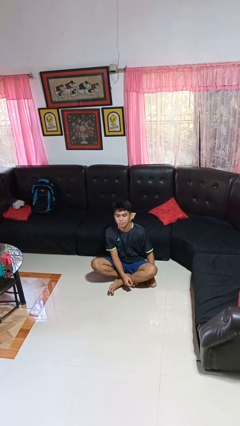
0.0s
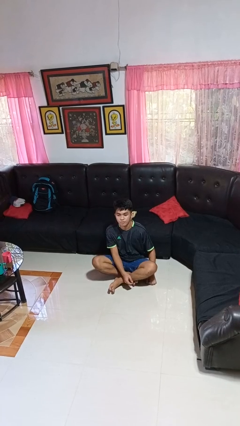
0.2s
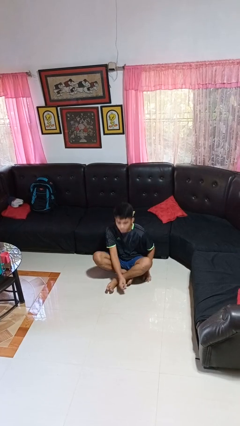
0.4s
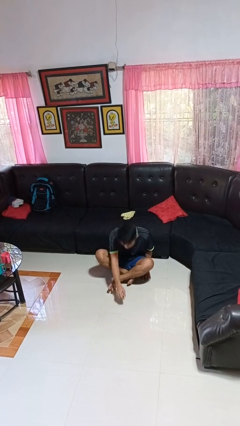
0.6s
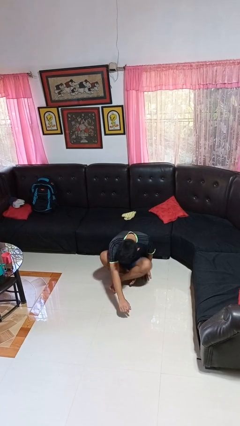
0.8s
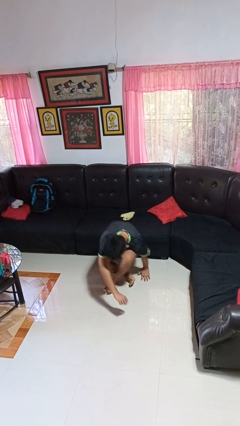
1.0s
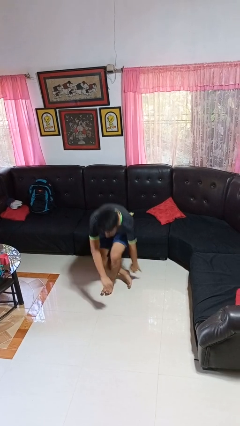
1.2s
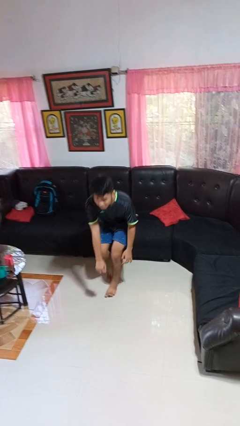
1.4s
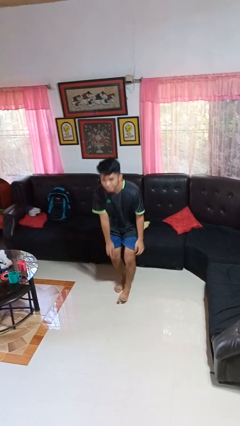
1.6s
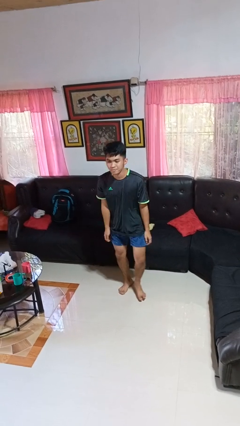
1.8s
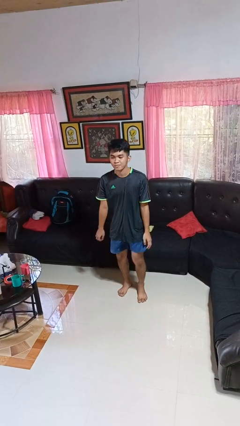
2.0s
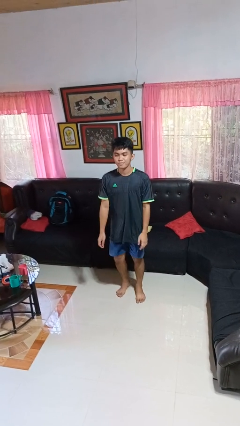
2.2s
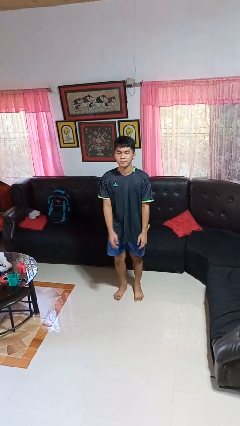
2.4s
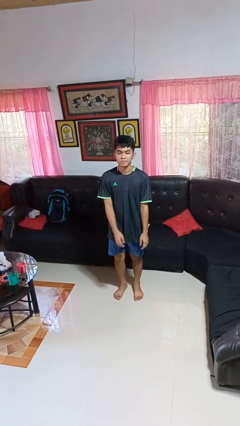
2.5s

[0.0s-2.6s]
person stands up from floor

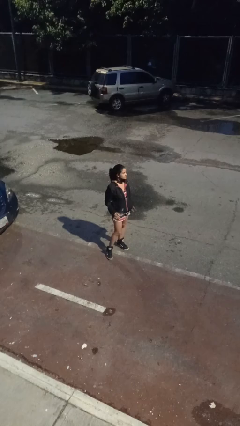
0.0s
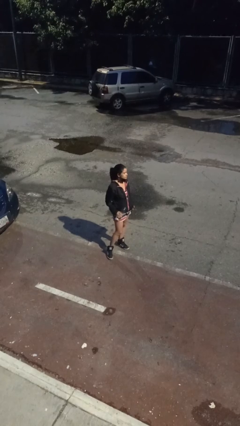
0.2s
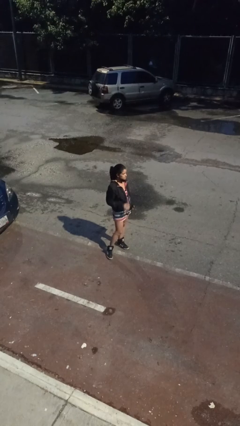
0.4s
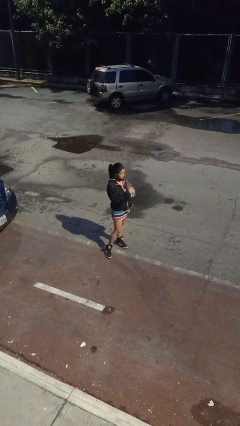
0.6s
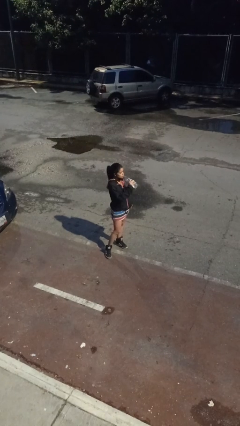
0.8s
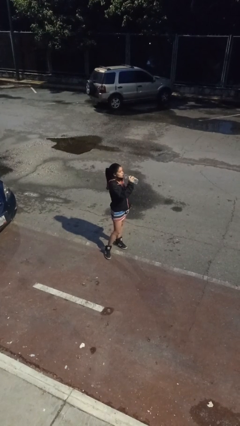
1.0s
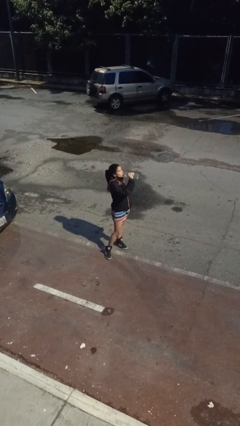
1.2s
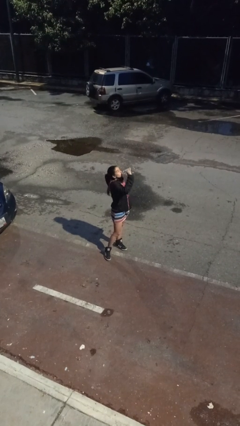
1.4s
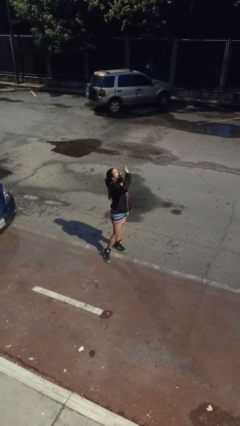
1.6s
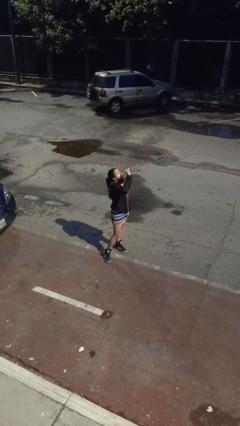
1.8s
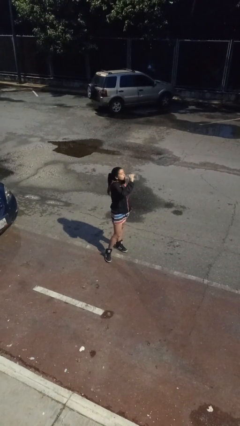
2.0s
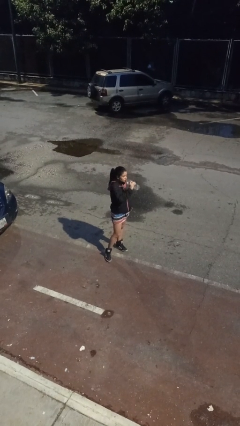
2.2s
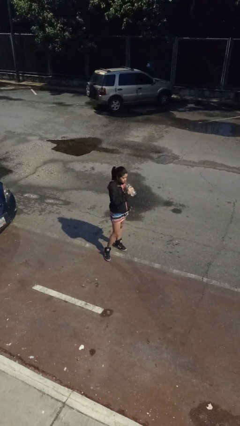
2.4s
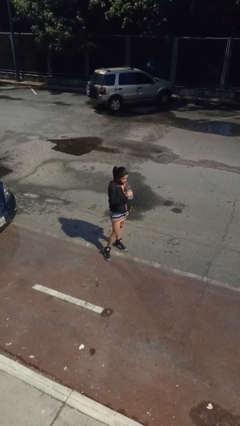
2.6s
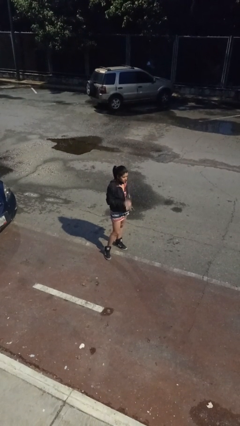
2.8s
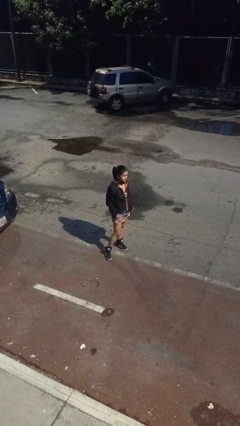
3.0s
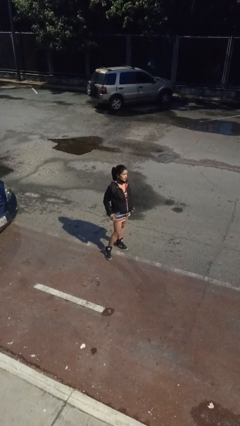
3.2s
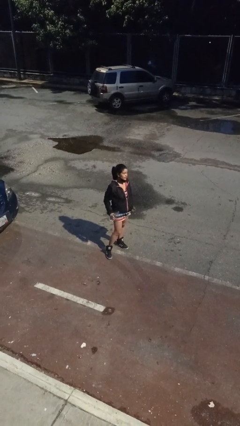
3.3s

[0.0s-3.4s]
person drinks from bottle

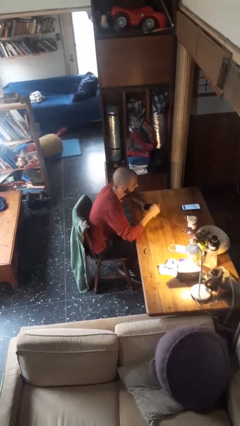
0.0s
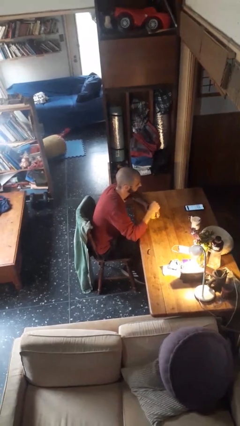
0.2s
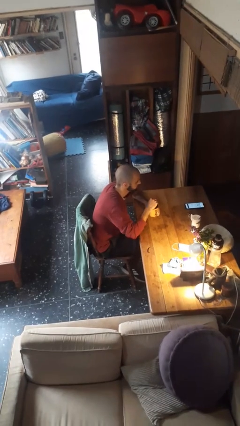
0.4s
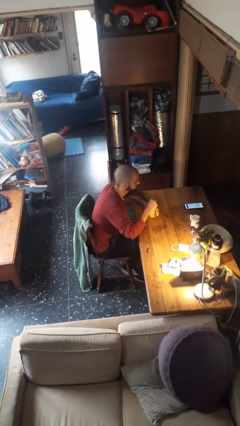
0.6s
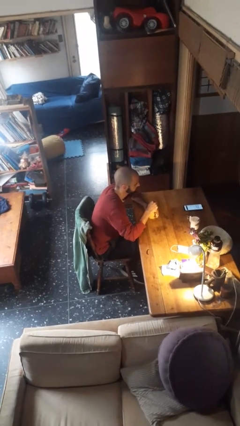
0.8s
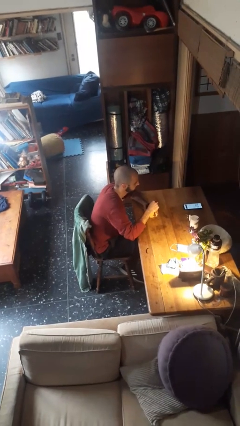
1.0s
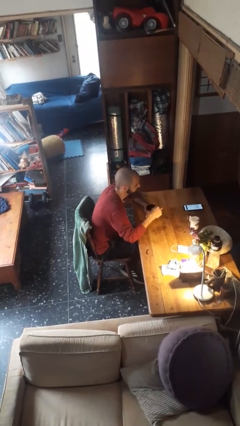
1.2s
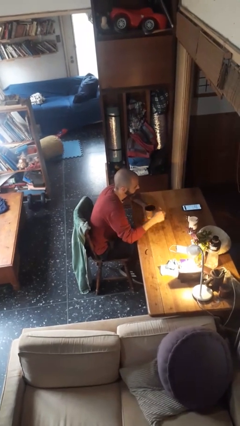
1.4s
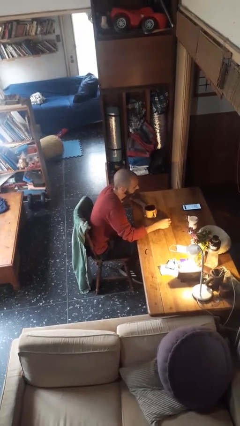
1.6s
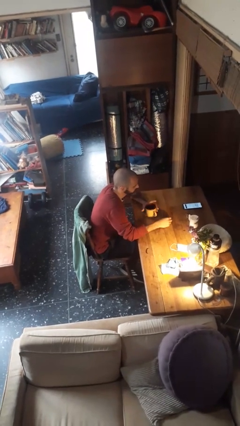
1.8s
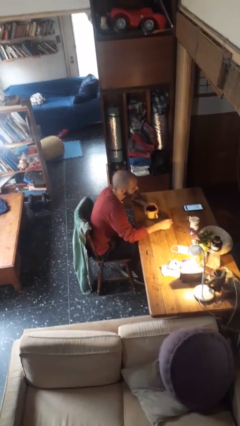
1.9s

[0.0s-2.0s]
person stirs mug

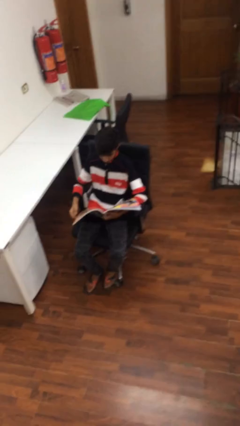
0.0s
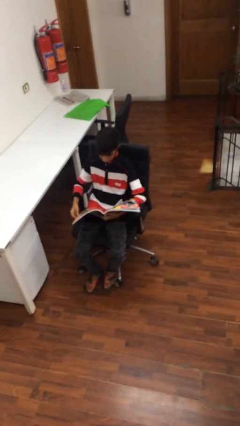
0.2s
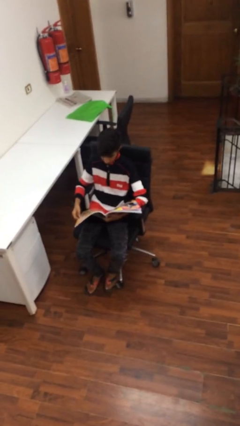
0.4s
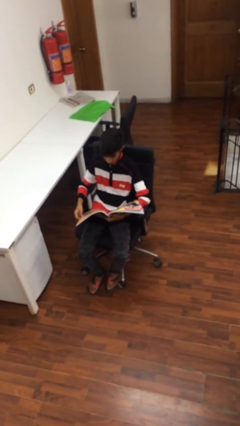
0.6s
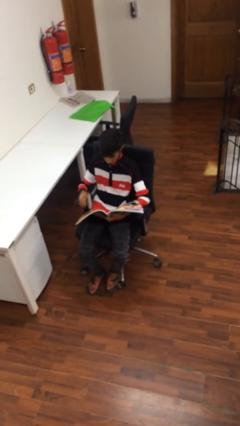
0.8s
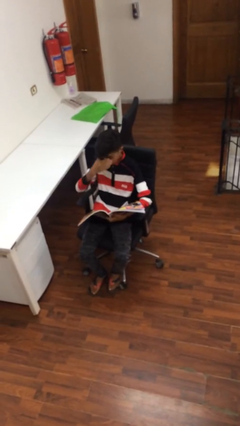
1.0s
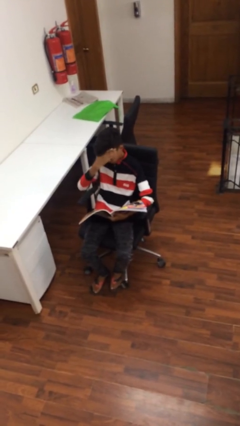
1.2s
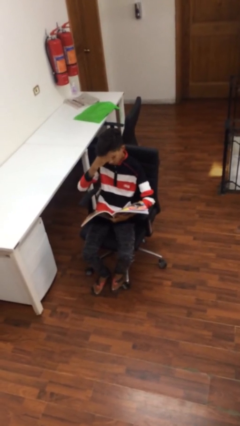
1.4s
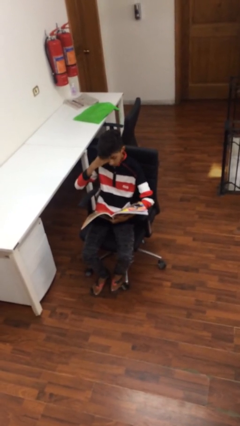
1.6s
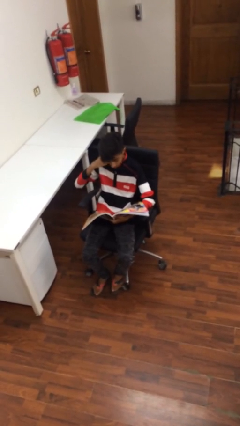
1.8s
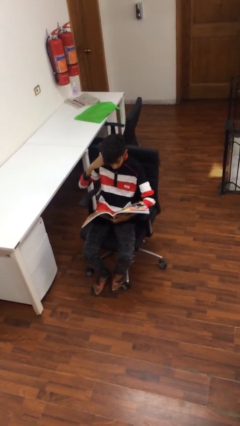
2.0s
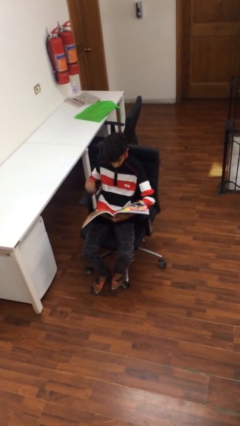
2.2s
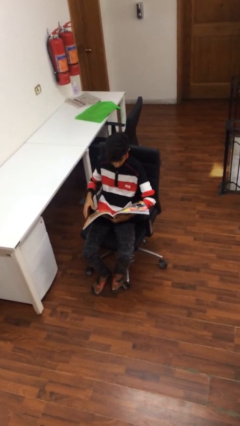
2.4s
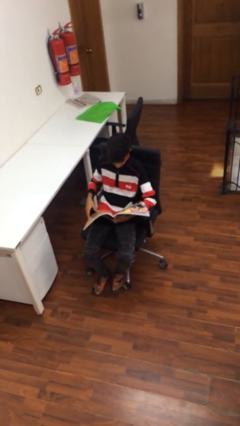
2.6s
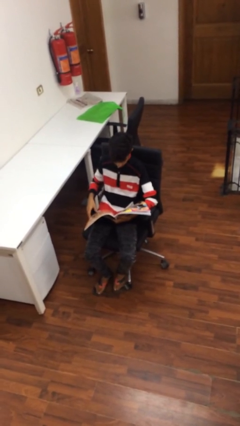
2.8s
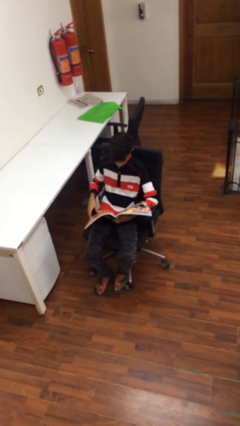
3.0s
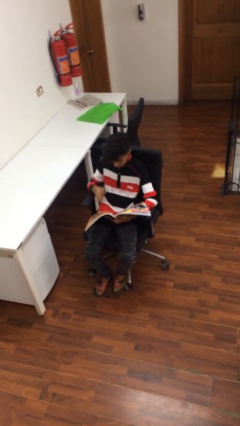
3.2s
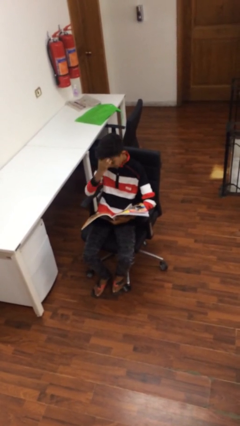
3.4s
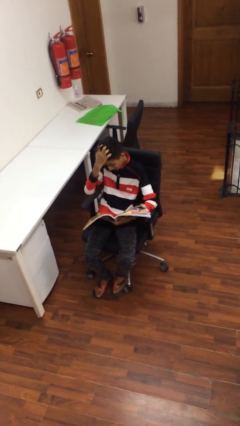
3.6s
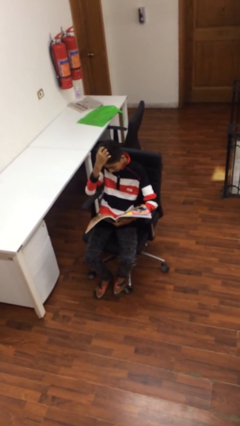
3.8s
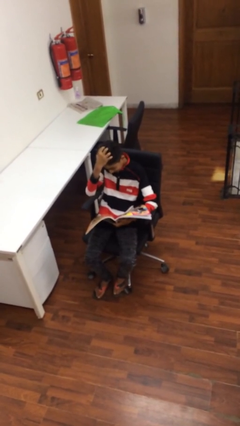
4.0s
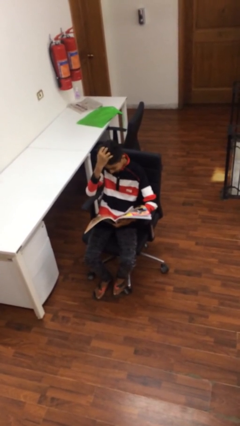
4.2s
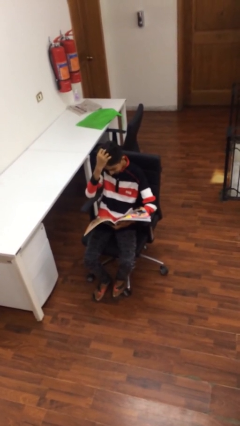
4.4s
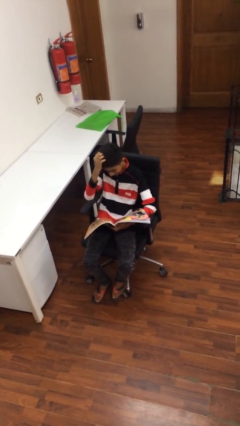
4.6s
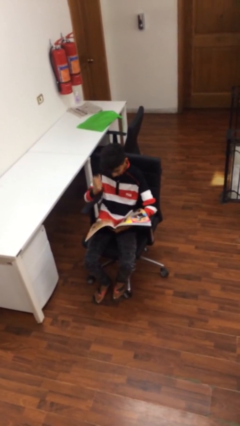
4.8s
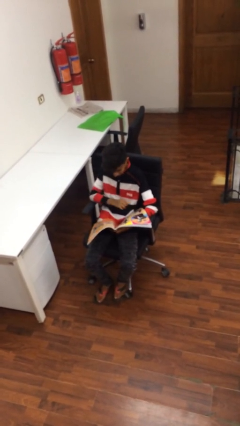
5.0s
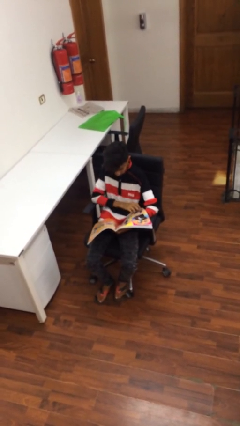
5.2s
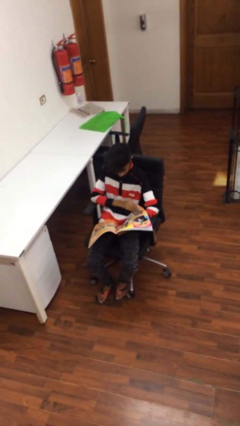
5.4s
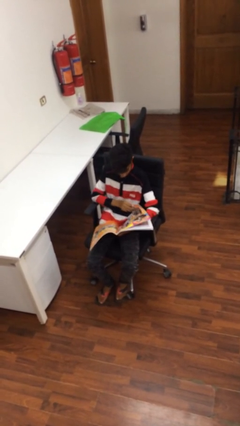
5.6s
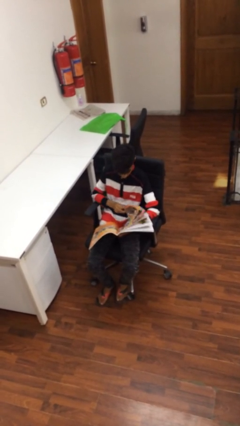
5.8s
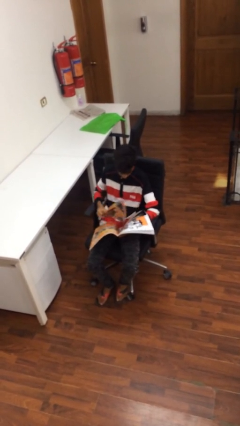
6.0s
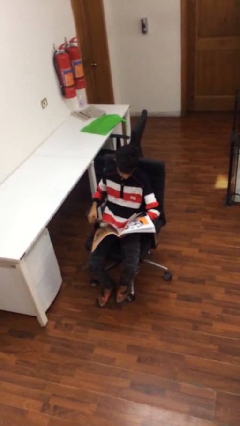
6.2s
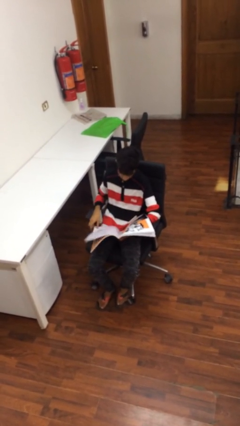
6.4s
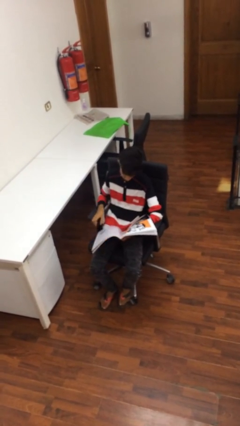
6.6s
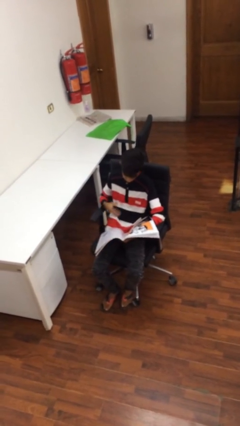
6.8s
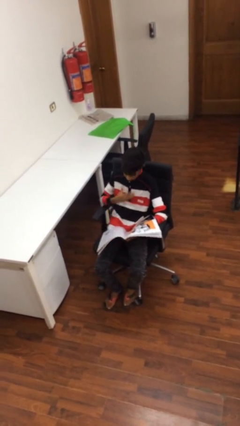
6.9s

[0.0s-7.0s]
person reads document

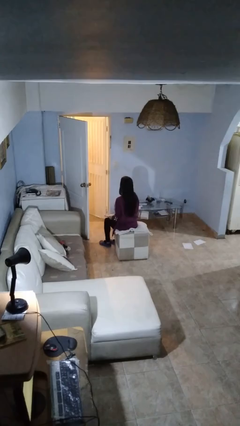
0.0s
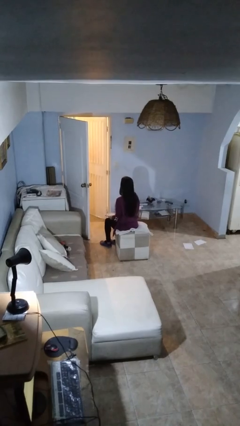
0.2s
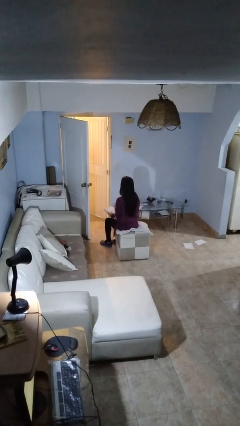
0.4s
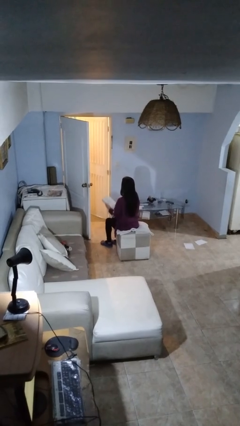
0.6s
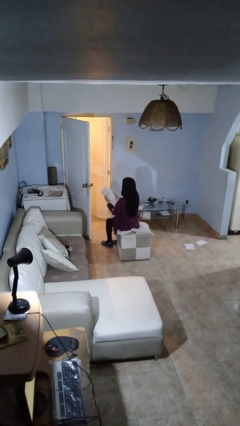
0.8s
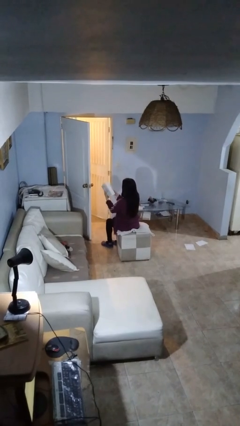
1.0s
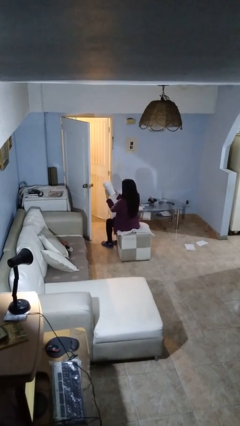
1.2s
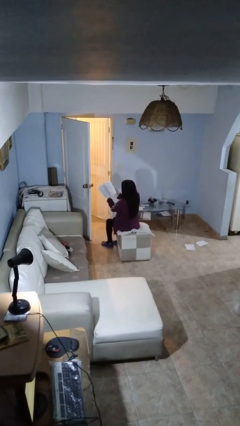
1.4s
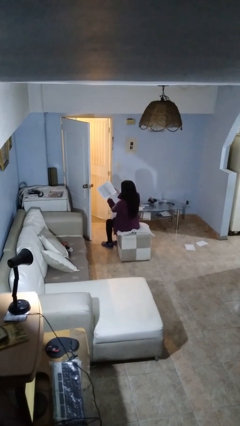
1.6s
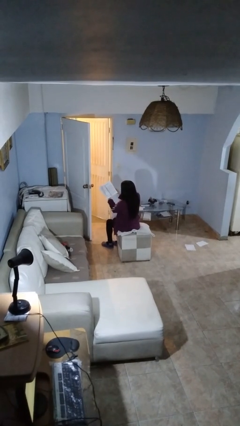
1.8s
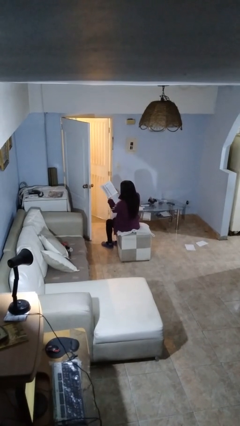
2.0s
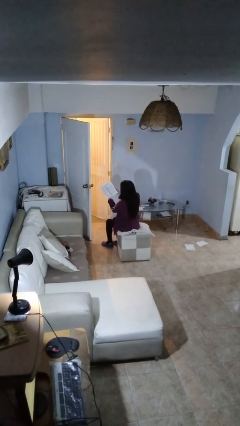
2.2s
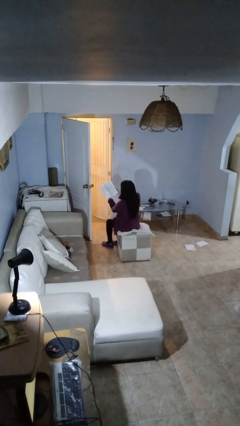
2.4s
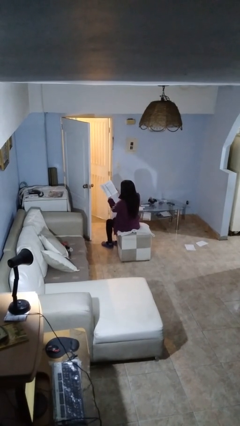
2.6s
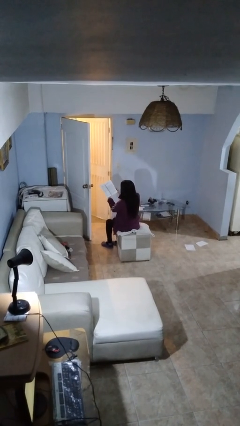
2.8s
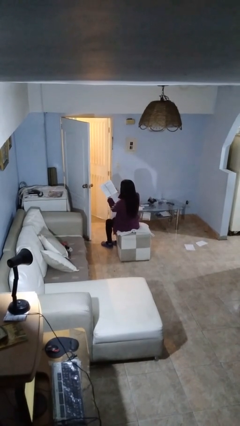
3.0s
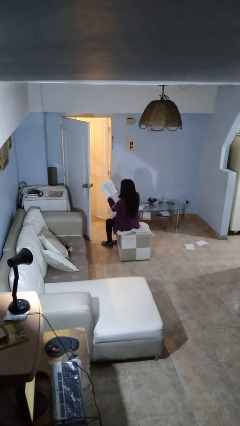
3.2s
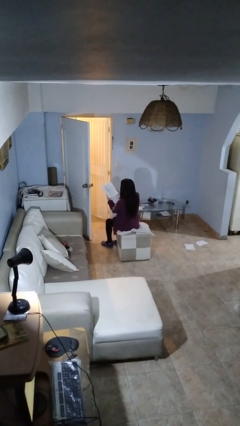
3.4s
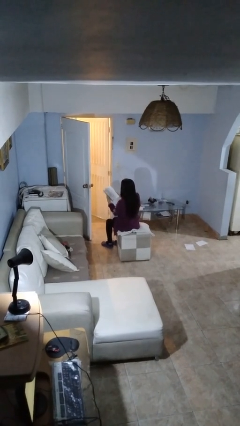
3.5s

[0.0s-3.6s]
person reads book
